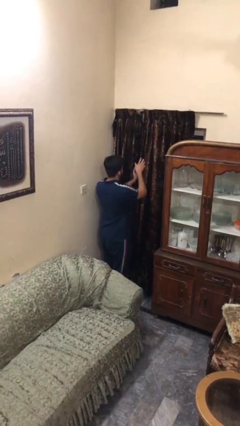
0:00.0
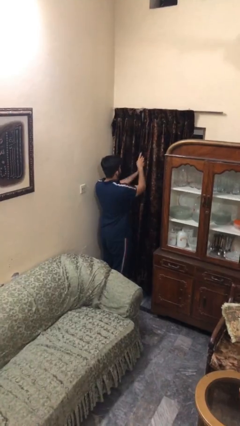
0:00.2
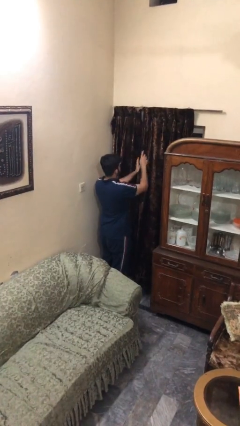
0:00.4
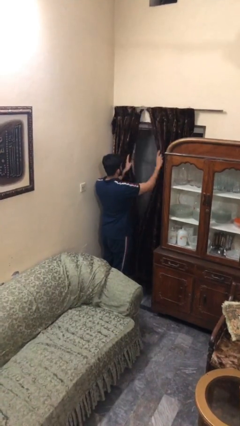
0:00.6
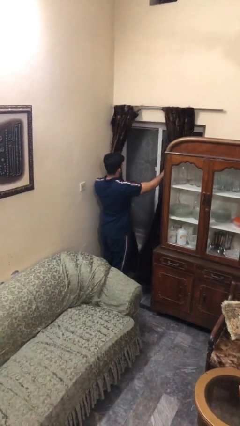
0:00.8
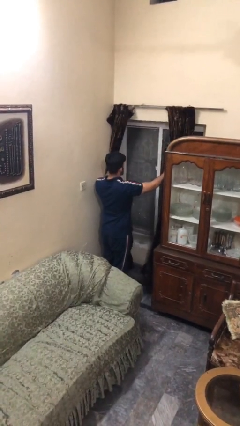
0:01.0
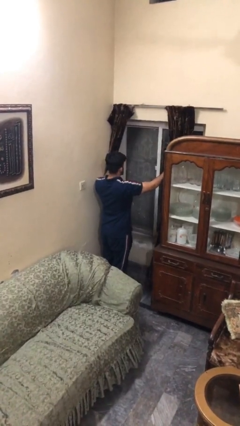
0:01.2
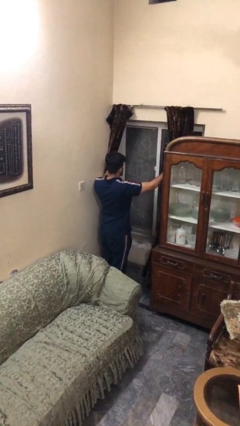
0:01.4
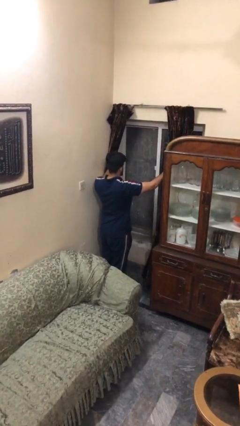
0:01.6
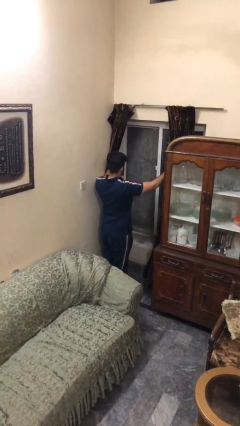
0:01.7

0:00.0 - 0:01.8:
person opens curtains

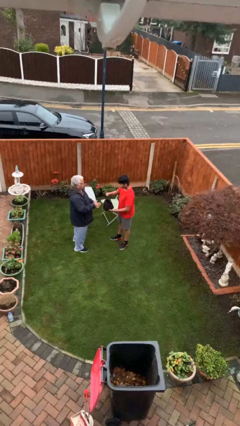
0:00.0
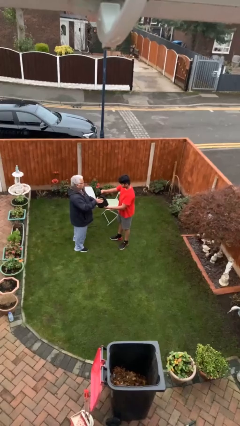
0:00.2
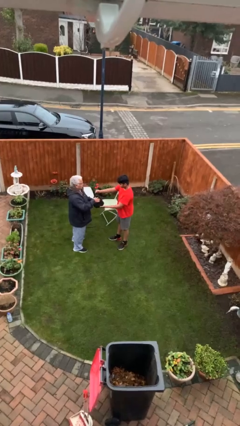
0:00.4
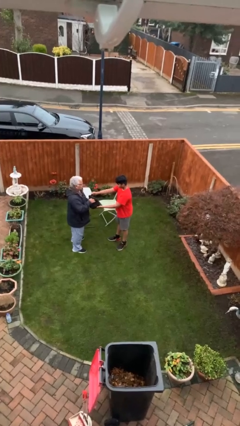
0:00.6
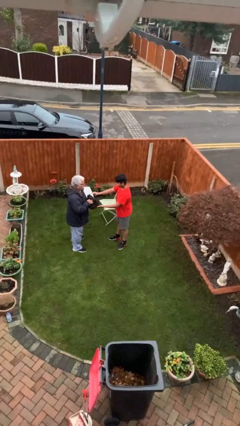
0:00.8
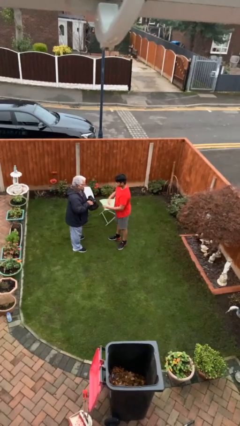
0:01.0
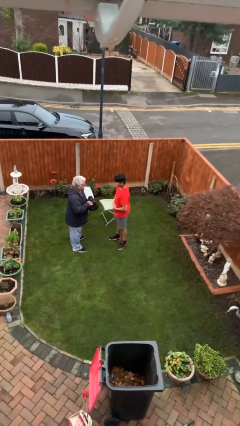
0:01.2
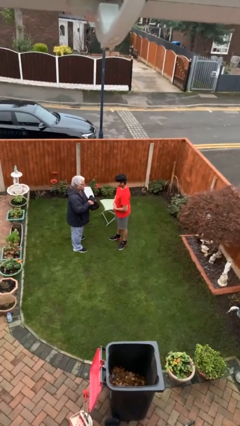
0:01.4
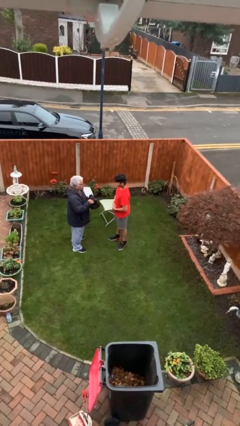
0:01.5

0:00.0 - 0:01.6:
person transfers object to person

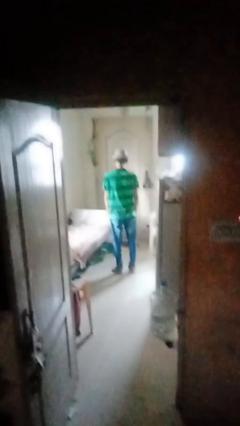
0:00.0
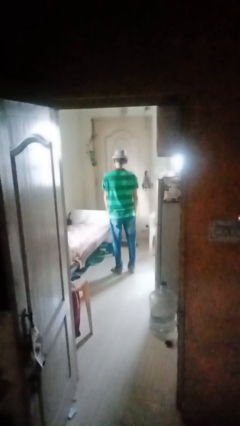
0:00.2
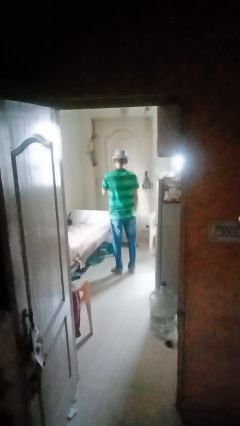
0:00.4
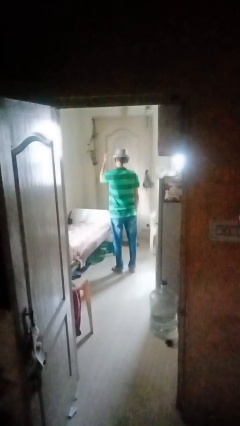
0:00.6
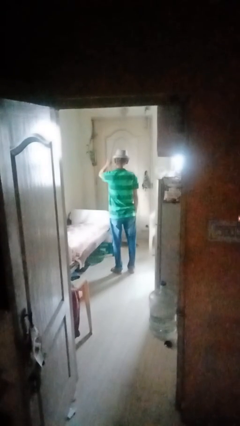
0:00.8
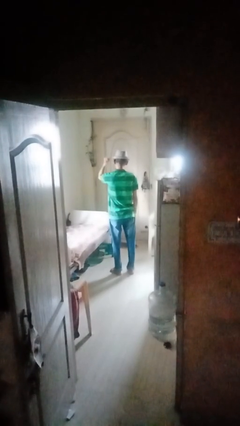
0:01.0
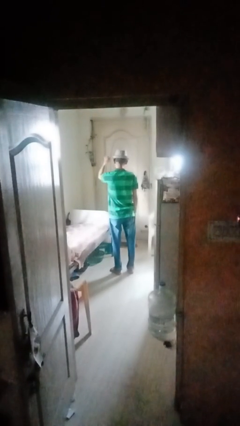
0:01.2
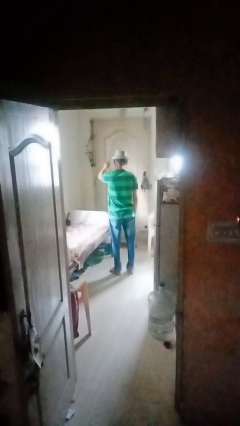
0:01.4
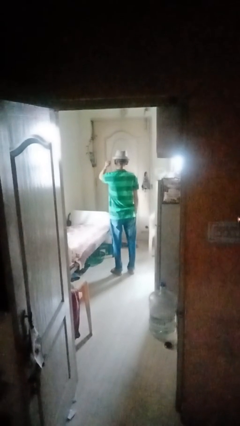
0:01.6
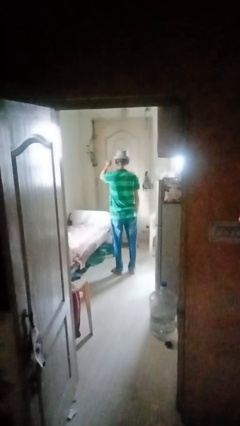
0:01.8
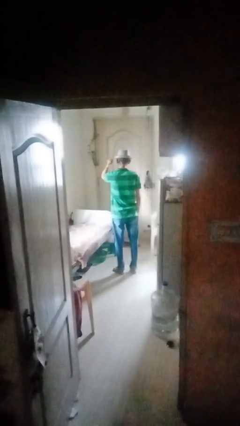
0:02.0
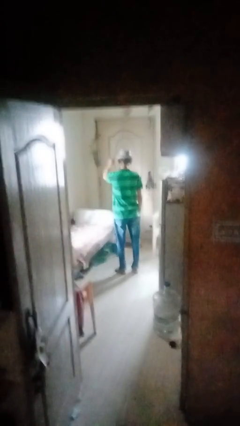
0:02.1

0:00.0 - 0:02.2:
person gestures behind me

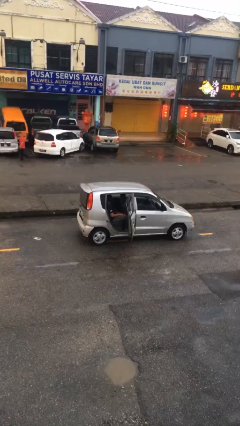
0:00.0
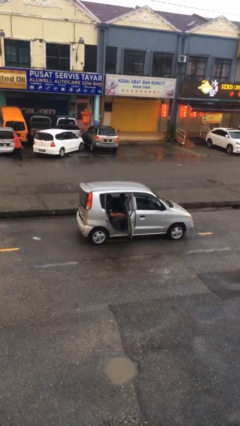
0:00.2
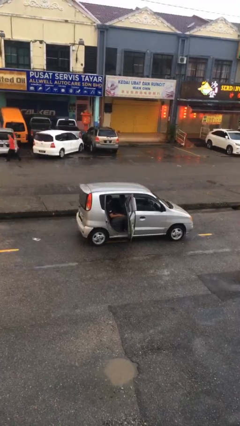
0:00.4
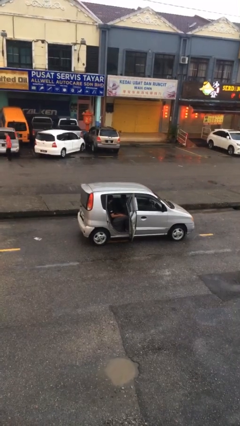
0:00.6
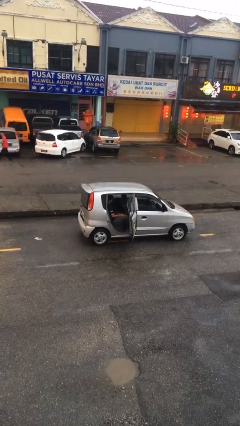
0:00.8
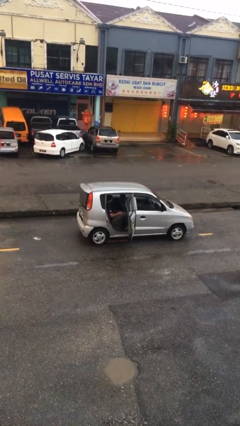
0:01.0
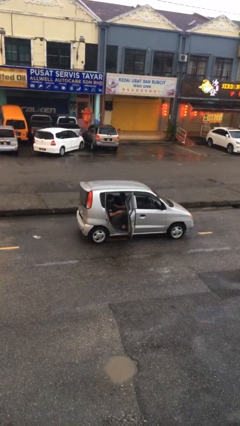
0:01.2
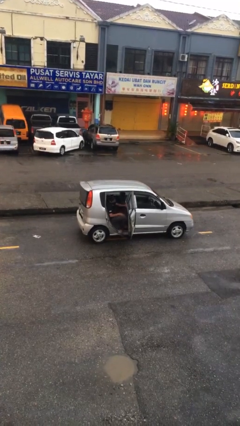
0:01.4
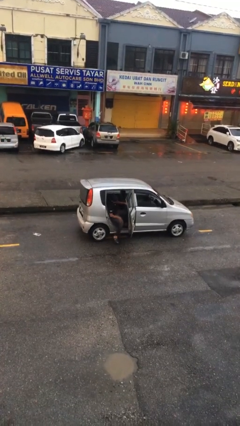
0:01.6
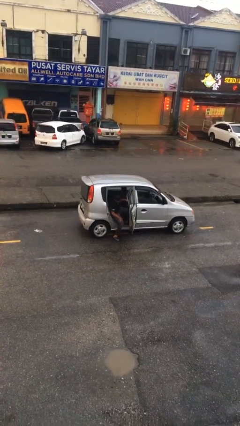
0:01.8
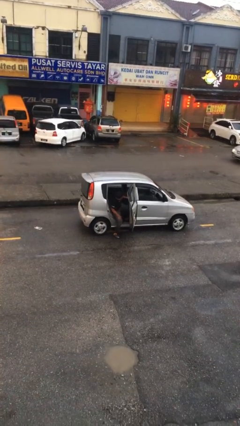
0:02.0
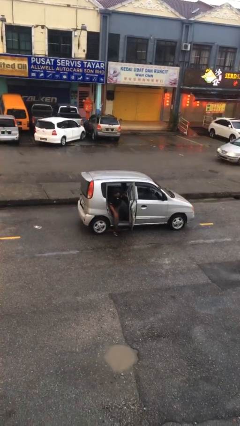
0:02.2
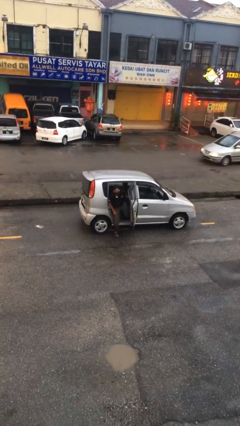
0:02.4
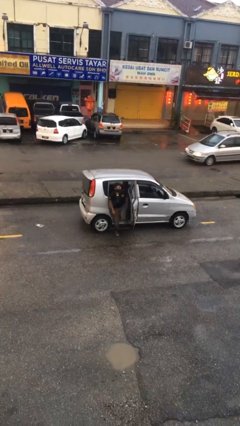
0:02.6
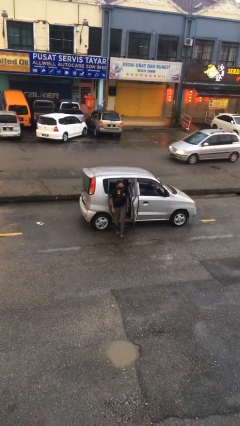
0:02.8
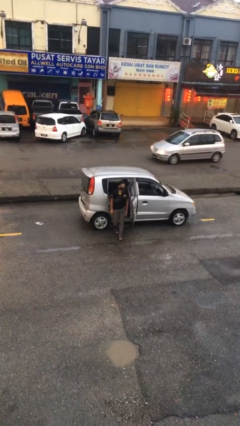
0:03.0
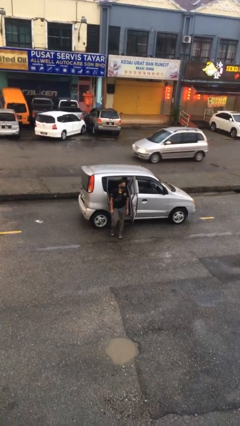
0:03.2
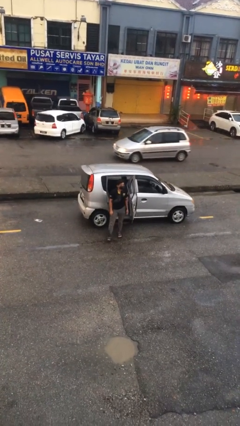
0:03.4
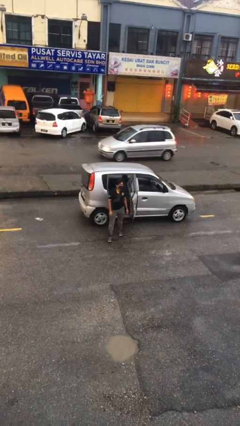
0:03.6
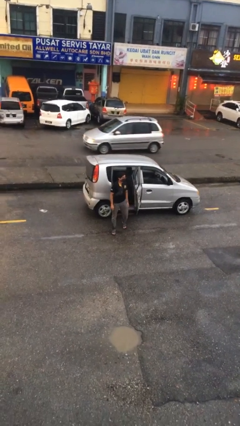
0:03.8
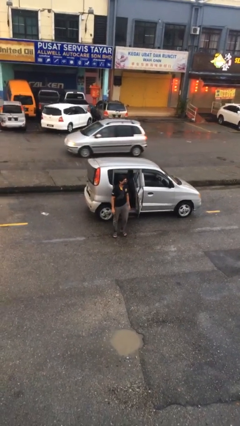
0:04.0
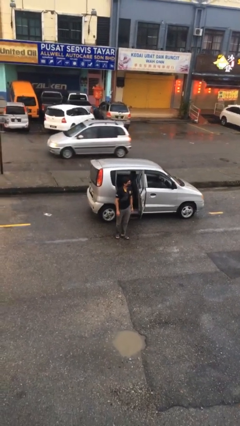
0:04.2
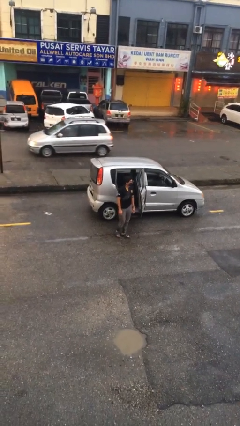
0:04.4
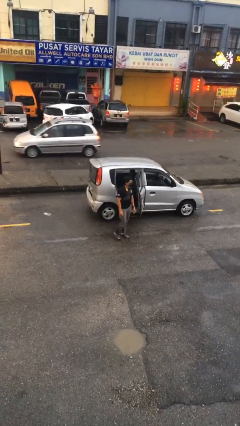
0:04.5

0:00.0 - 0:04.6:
person exits car

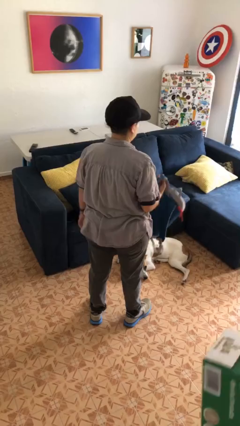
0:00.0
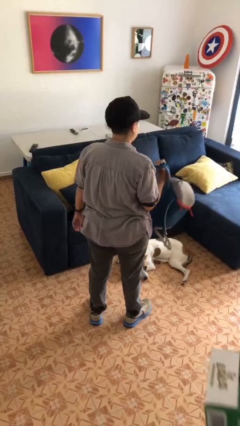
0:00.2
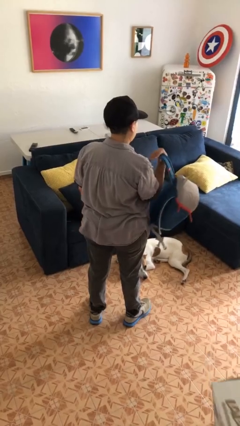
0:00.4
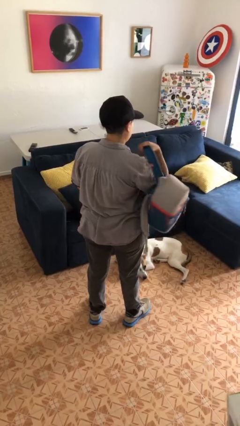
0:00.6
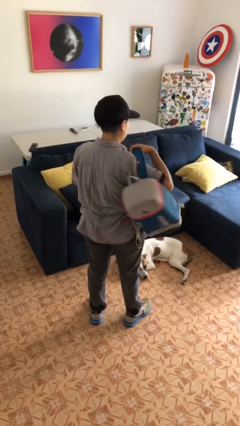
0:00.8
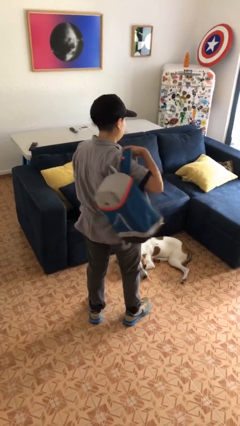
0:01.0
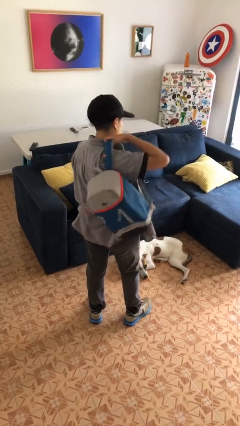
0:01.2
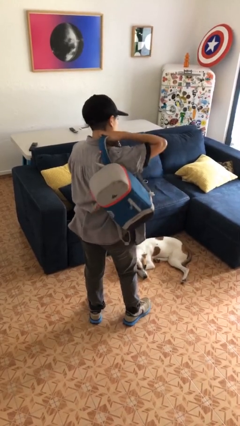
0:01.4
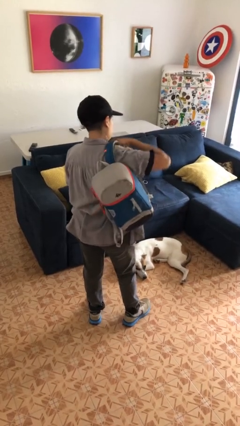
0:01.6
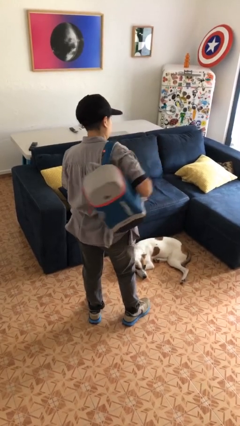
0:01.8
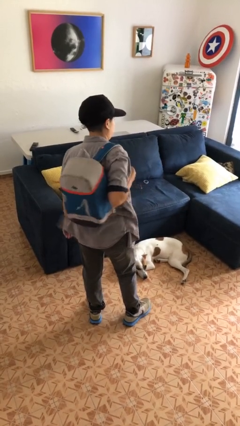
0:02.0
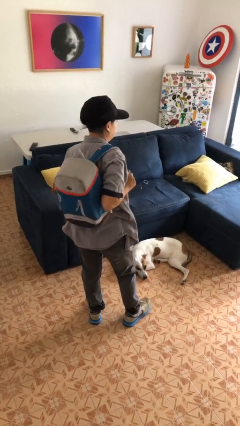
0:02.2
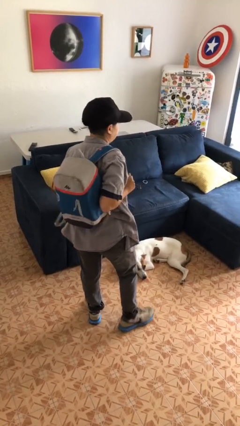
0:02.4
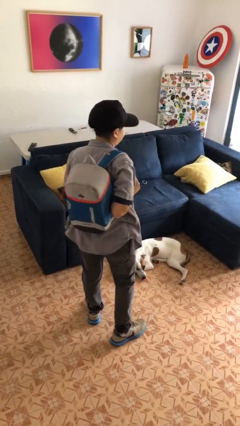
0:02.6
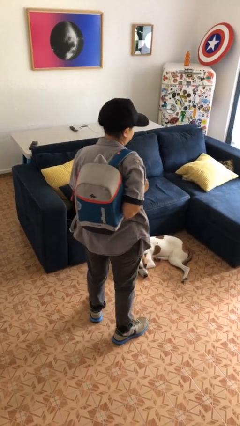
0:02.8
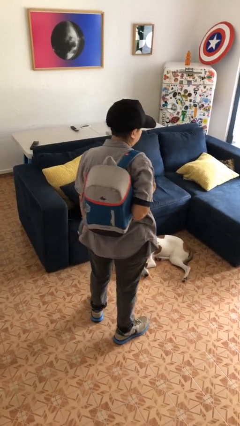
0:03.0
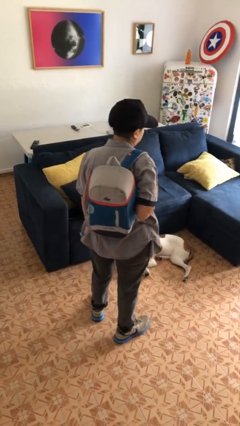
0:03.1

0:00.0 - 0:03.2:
person puts on backpack

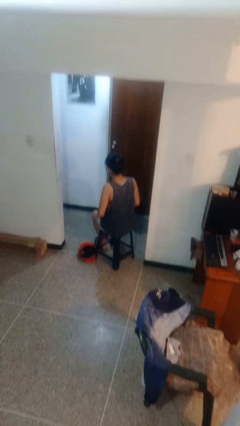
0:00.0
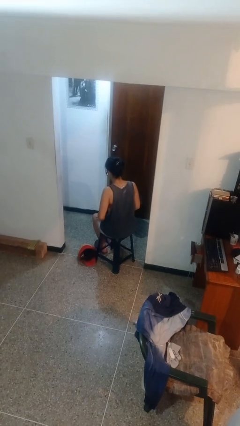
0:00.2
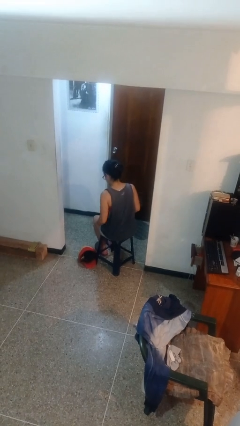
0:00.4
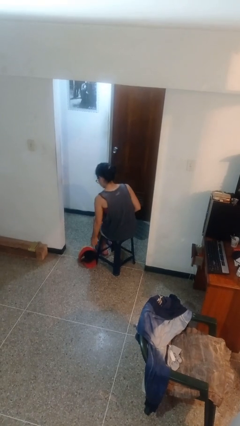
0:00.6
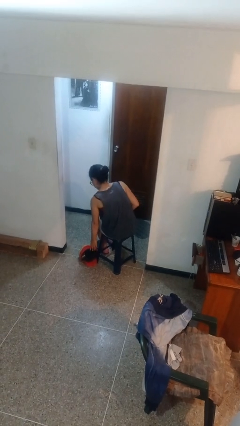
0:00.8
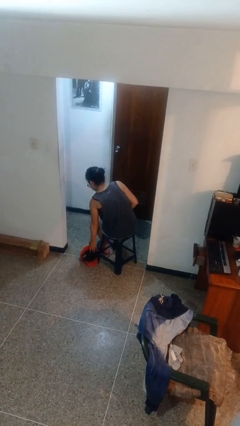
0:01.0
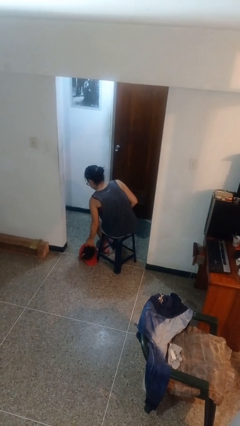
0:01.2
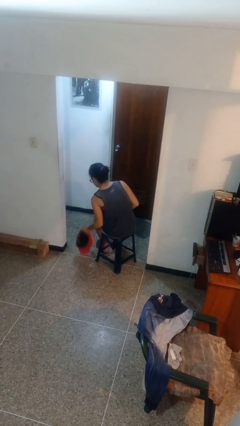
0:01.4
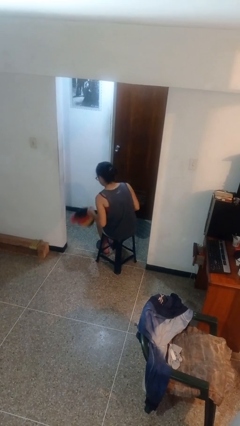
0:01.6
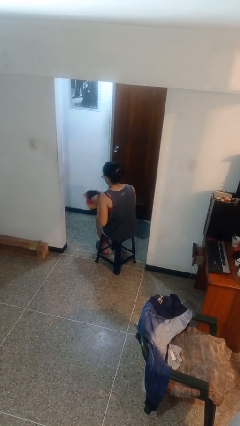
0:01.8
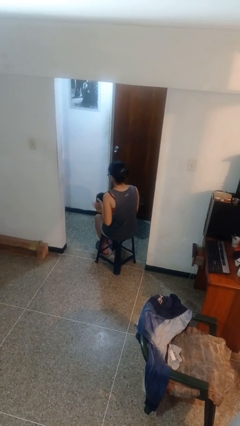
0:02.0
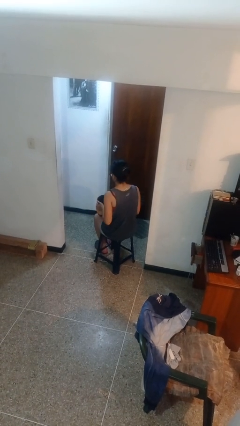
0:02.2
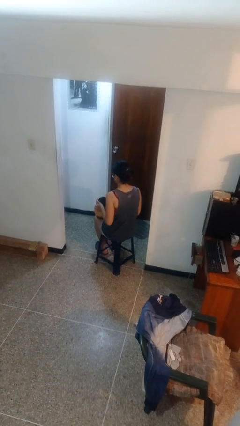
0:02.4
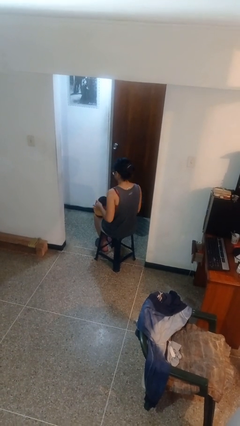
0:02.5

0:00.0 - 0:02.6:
person picks up object from floor

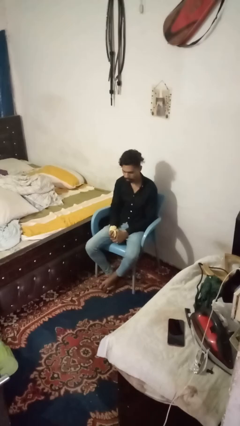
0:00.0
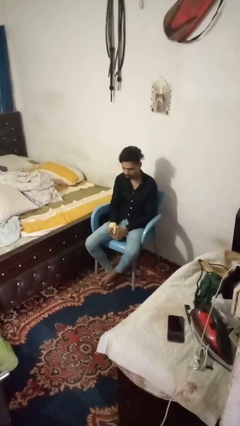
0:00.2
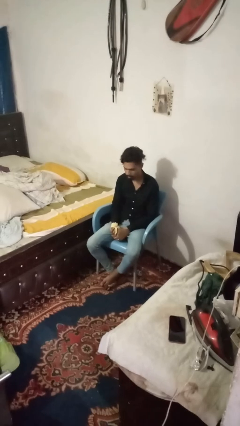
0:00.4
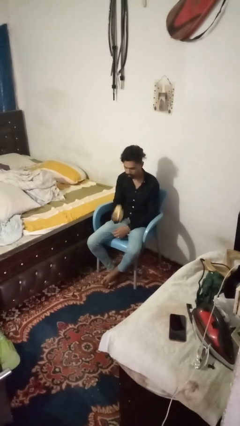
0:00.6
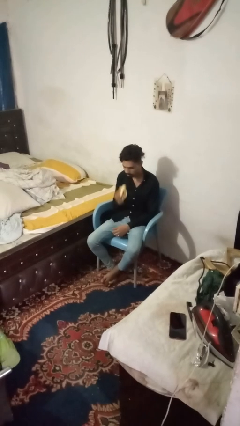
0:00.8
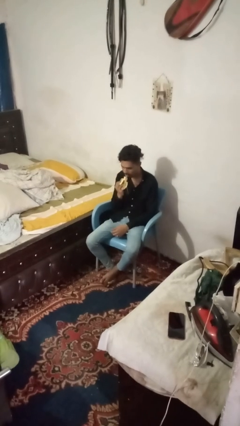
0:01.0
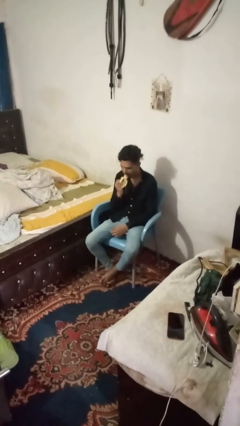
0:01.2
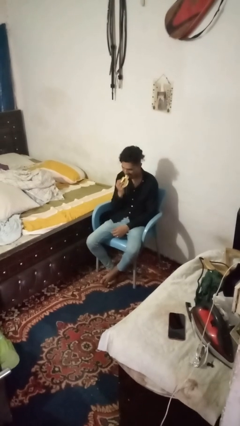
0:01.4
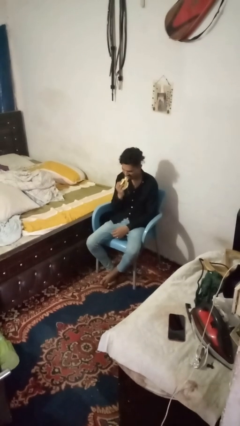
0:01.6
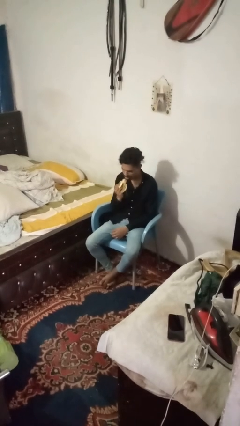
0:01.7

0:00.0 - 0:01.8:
person eats banana
